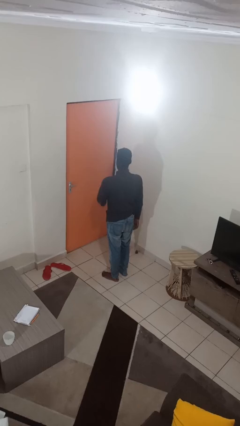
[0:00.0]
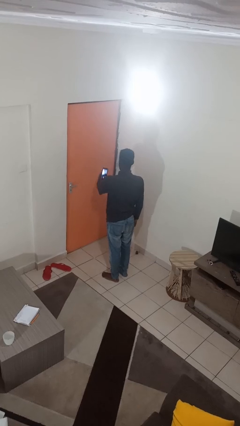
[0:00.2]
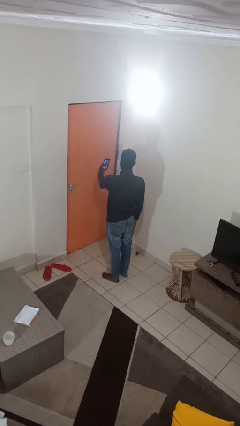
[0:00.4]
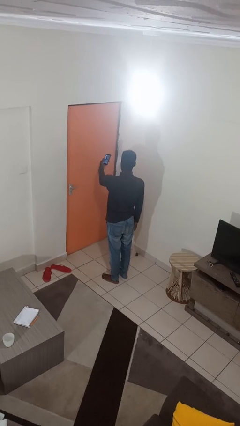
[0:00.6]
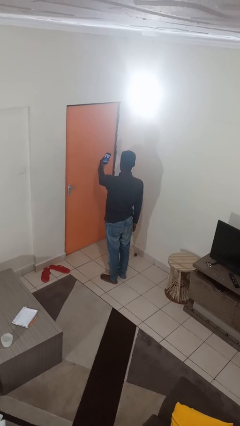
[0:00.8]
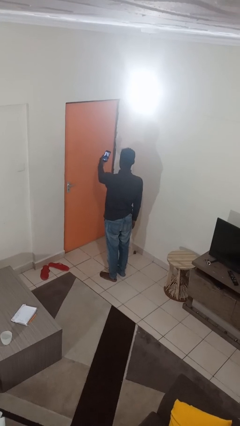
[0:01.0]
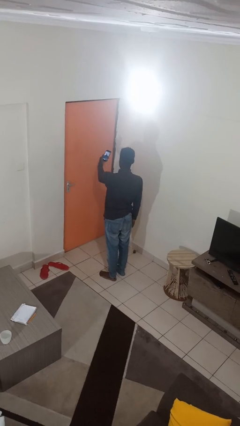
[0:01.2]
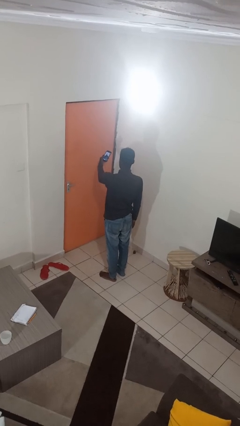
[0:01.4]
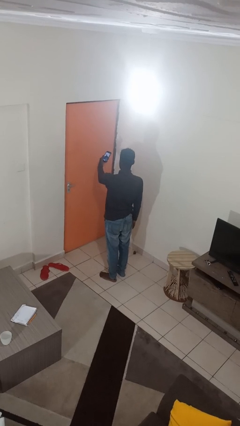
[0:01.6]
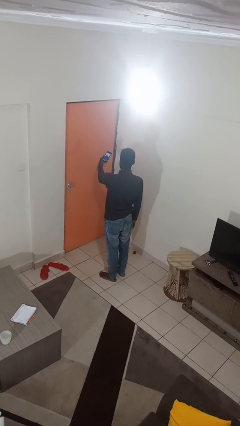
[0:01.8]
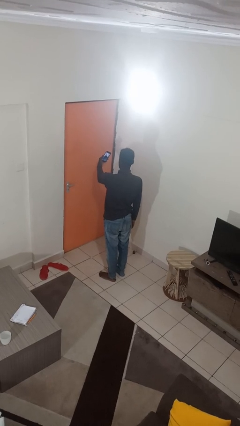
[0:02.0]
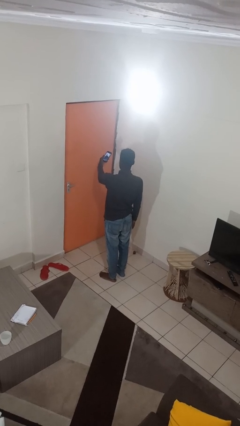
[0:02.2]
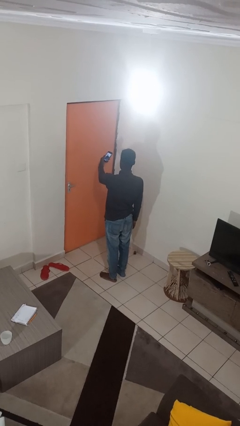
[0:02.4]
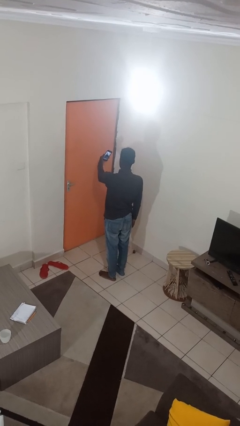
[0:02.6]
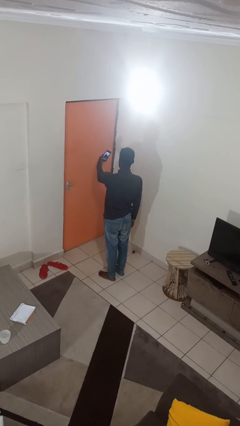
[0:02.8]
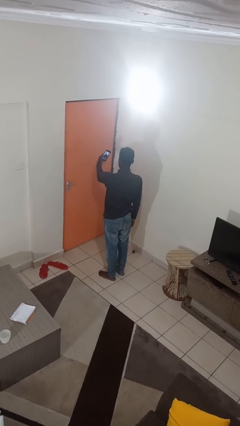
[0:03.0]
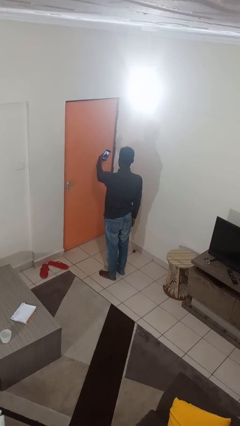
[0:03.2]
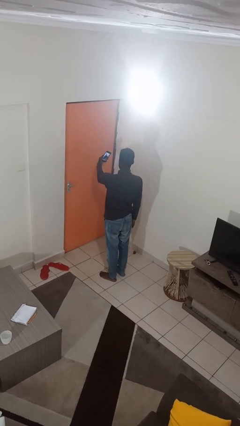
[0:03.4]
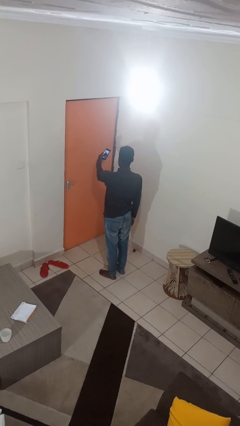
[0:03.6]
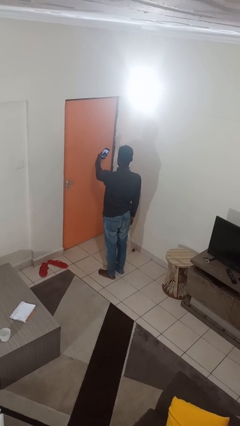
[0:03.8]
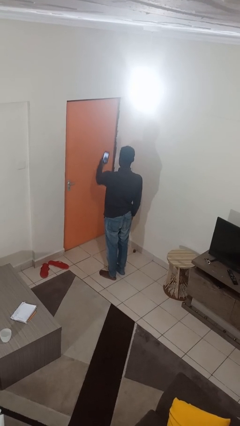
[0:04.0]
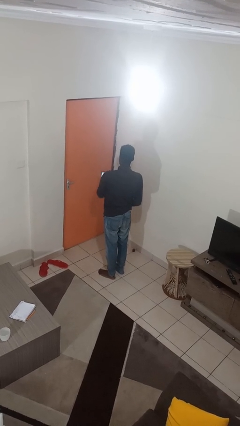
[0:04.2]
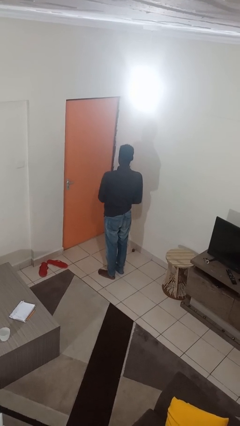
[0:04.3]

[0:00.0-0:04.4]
person takes selfie

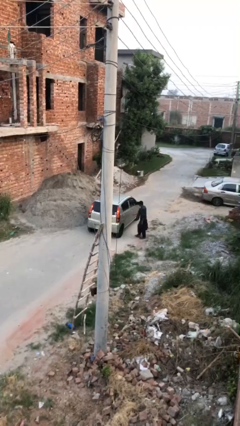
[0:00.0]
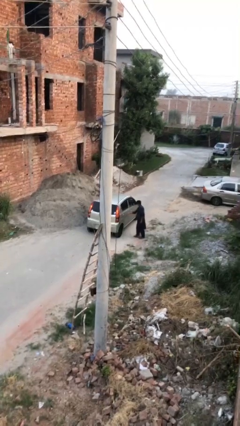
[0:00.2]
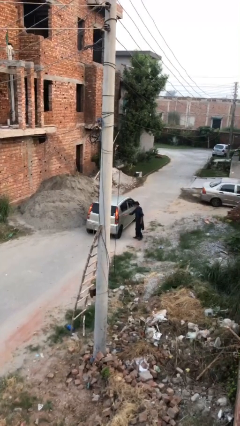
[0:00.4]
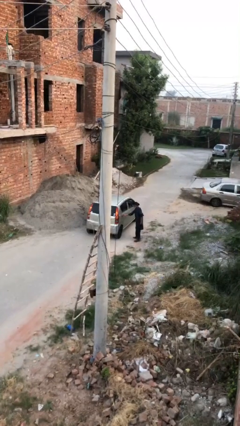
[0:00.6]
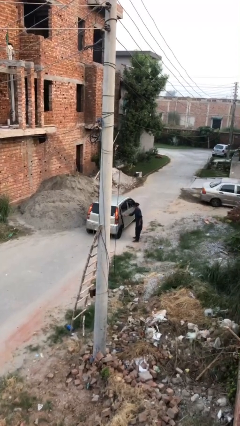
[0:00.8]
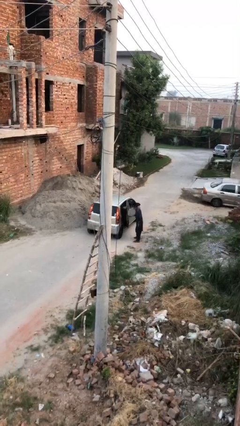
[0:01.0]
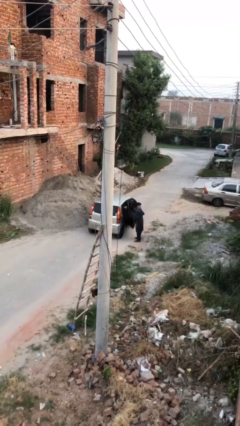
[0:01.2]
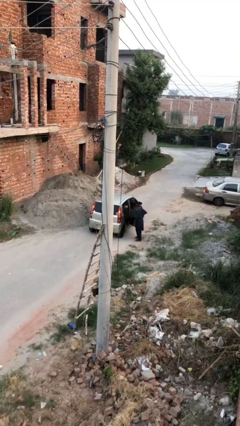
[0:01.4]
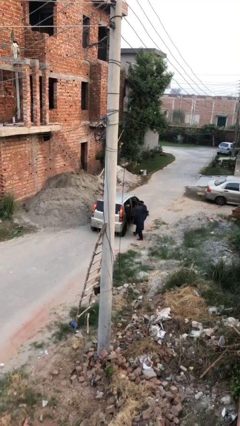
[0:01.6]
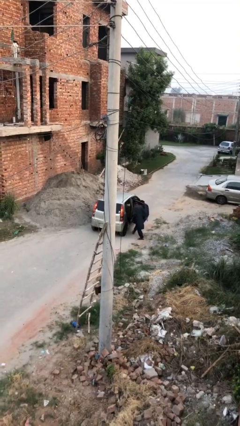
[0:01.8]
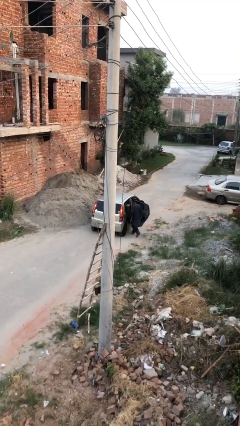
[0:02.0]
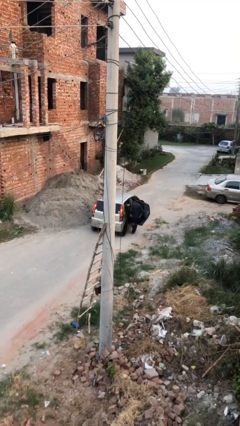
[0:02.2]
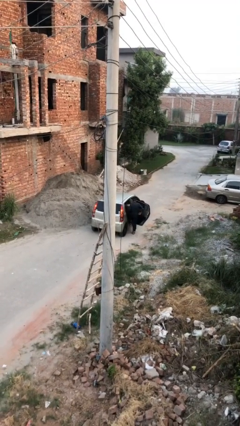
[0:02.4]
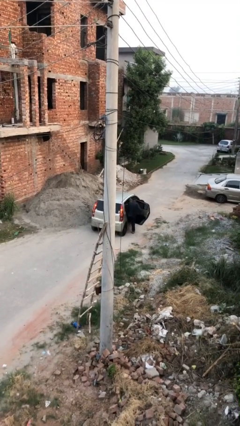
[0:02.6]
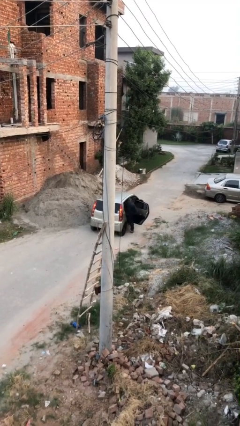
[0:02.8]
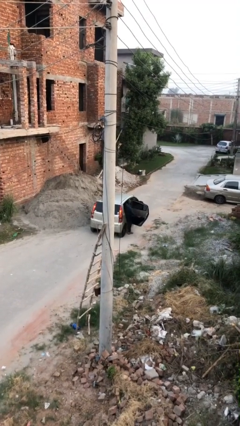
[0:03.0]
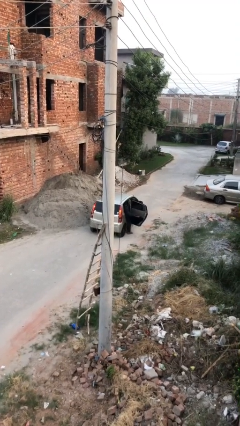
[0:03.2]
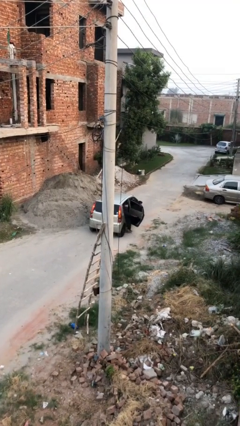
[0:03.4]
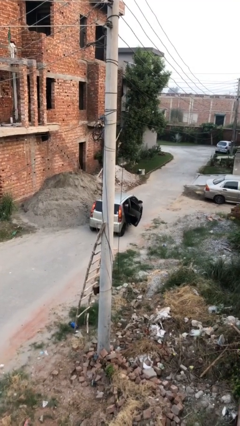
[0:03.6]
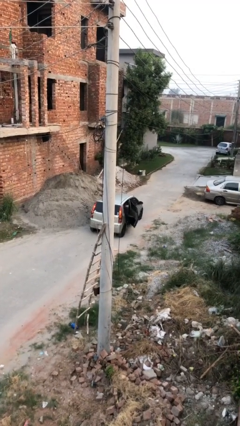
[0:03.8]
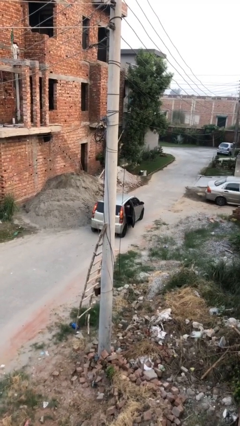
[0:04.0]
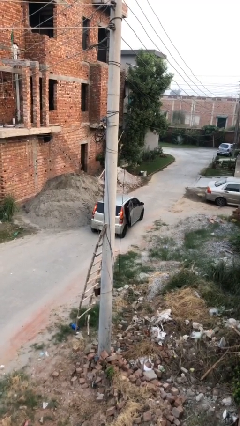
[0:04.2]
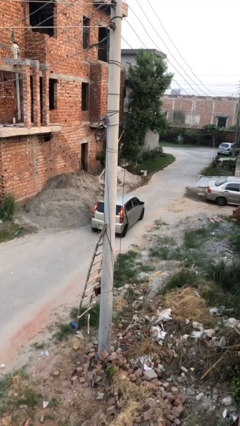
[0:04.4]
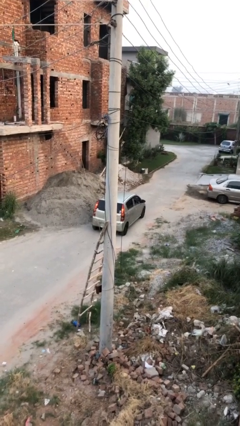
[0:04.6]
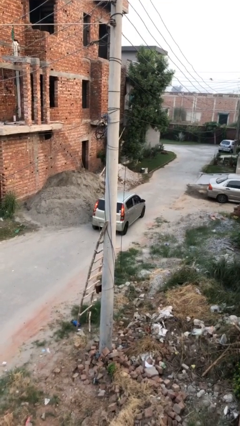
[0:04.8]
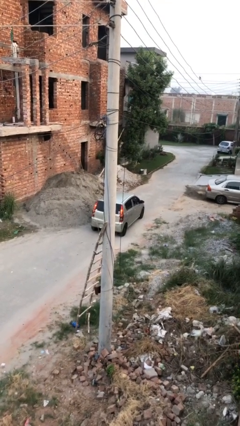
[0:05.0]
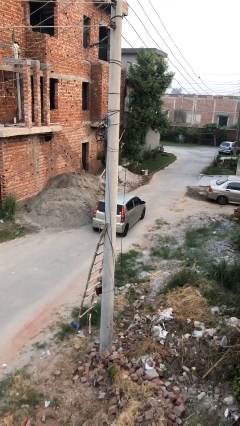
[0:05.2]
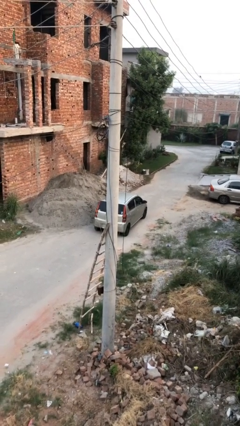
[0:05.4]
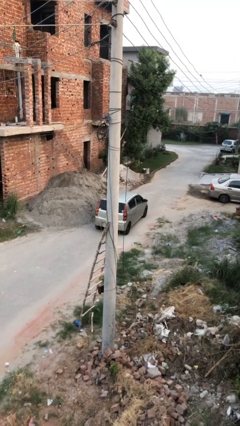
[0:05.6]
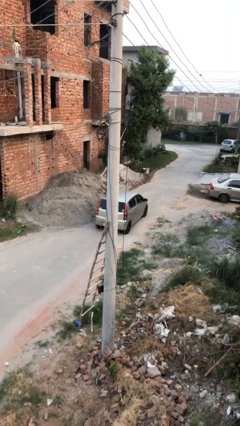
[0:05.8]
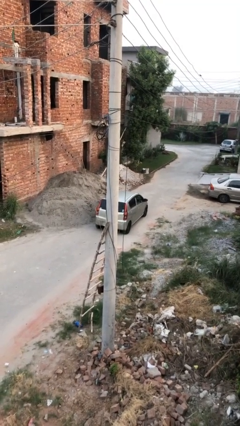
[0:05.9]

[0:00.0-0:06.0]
car picks up person

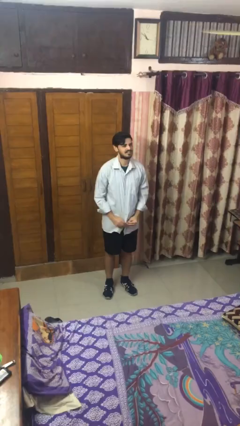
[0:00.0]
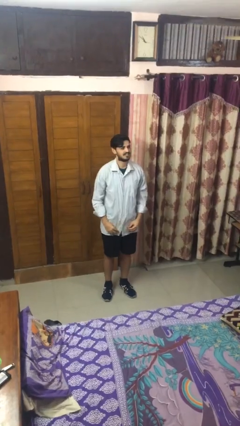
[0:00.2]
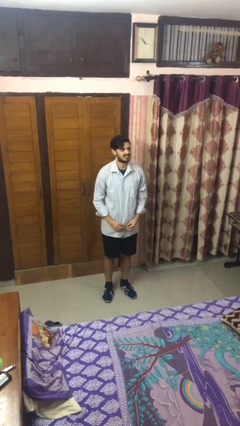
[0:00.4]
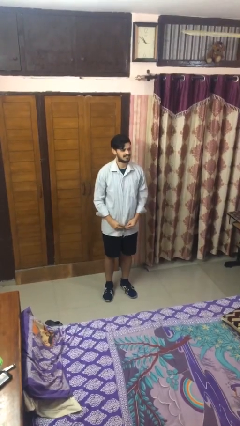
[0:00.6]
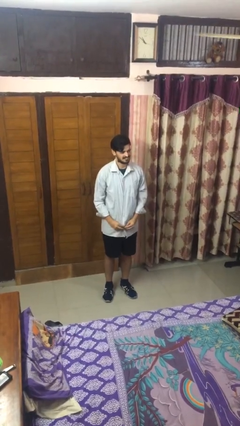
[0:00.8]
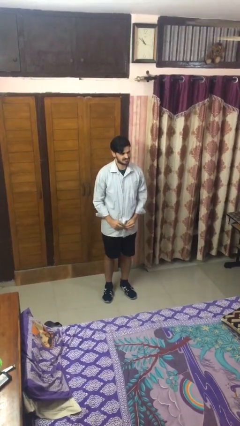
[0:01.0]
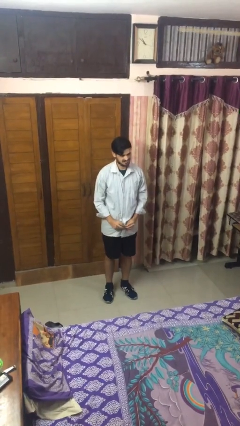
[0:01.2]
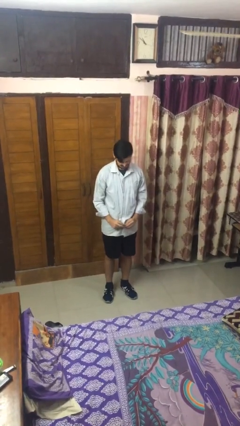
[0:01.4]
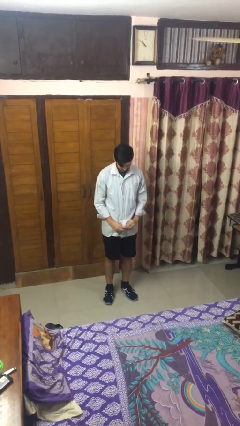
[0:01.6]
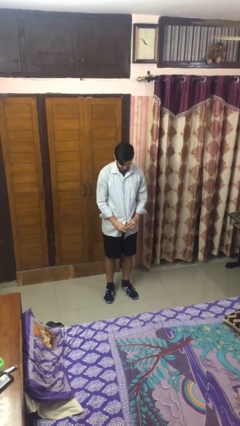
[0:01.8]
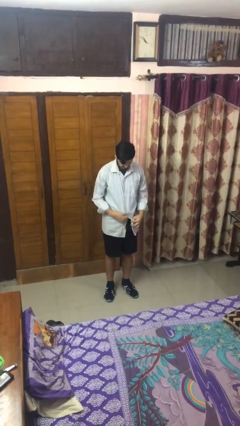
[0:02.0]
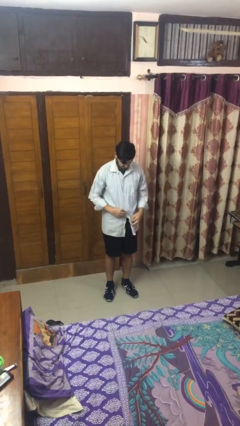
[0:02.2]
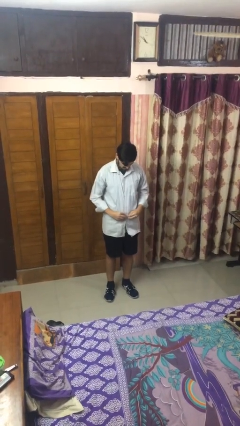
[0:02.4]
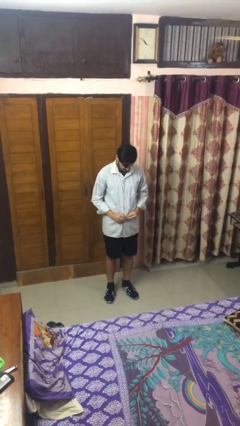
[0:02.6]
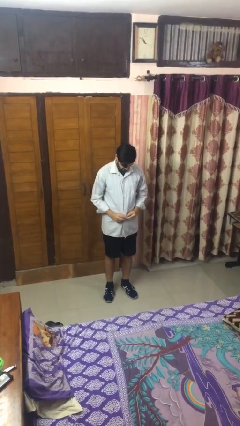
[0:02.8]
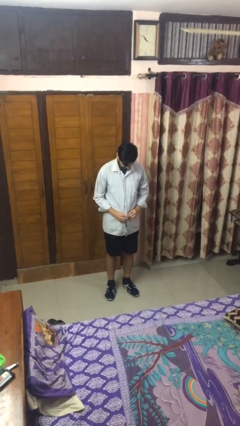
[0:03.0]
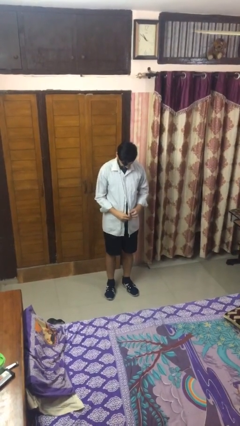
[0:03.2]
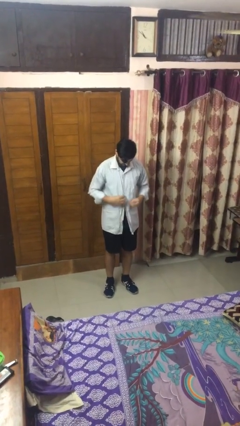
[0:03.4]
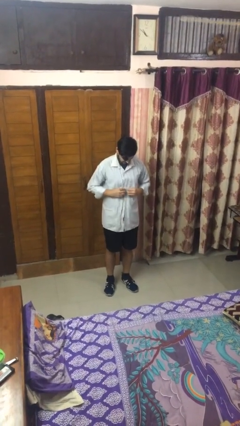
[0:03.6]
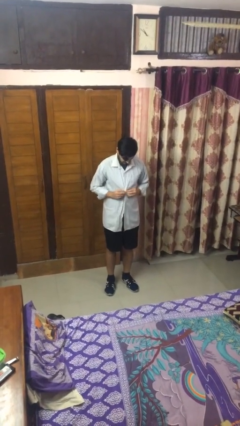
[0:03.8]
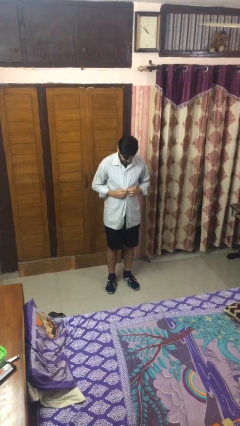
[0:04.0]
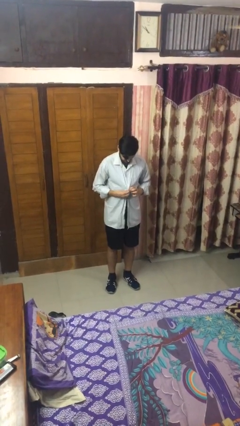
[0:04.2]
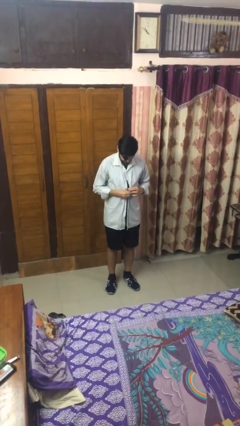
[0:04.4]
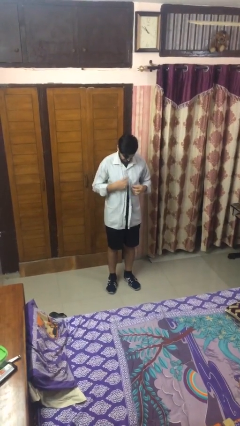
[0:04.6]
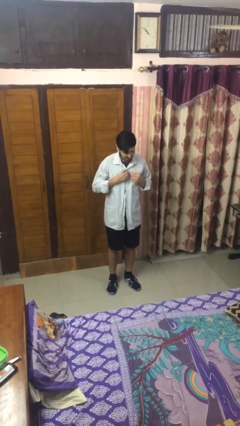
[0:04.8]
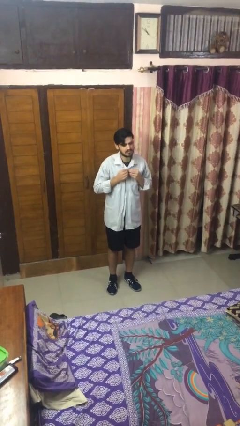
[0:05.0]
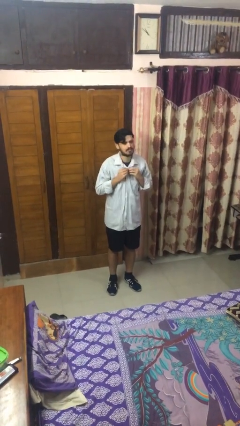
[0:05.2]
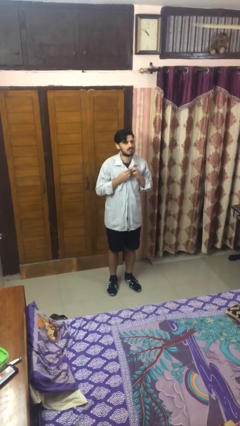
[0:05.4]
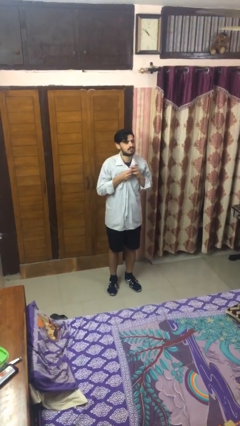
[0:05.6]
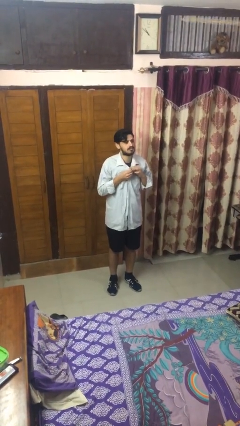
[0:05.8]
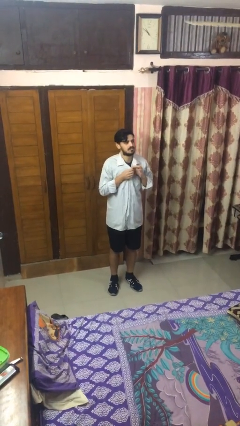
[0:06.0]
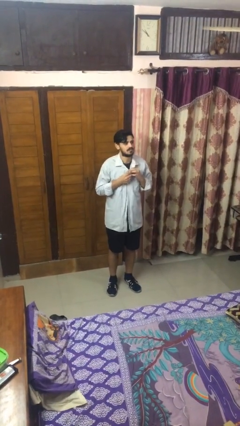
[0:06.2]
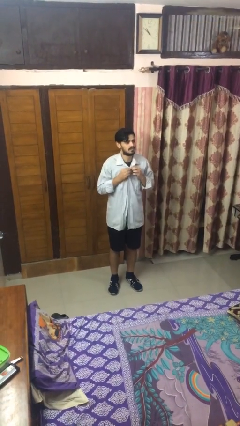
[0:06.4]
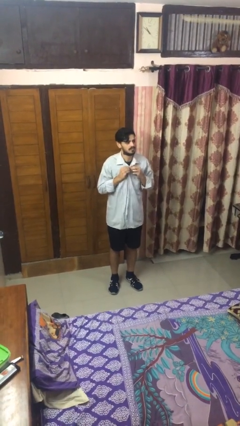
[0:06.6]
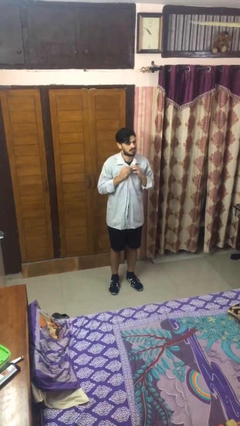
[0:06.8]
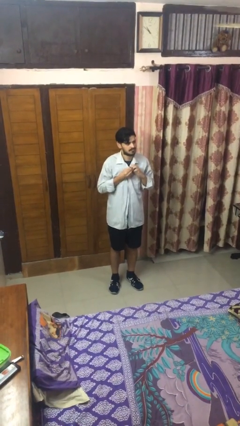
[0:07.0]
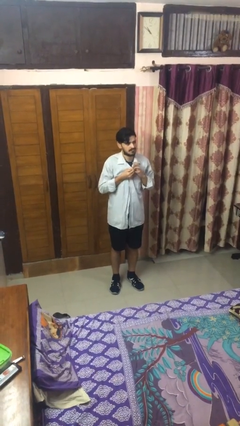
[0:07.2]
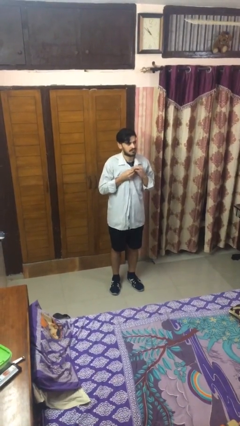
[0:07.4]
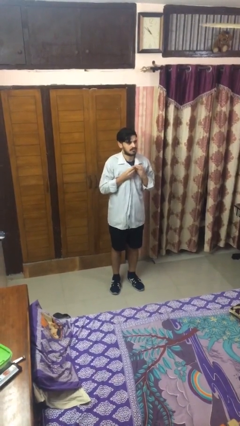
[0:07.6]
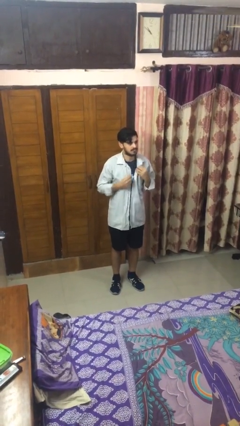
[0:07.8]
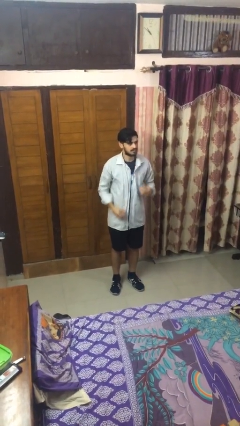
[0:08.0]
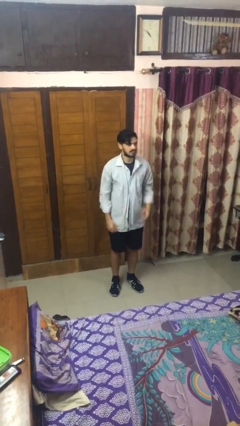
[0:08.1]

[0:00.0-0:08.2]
person unbuttons shirt
